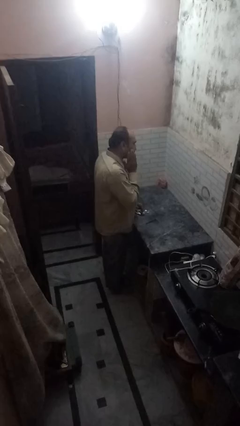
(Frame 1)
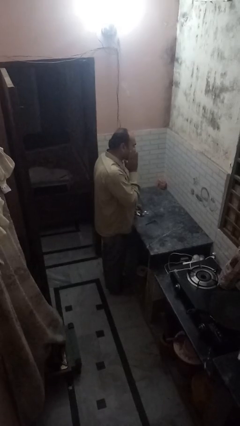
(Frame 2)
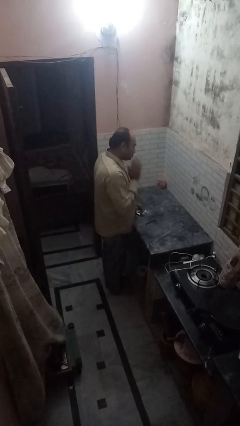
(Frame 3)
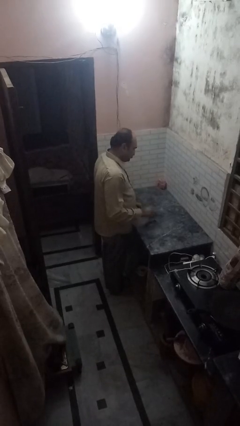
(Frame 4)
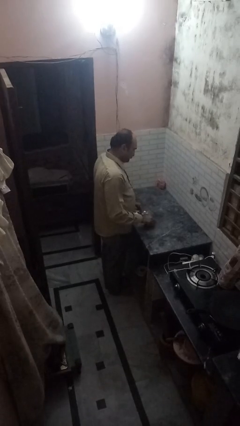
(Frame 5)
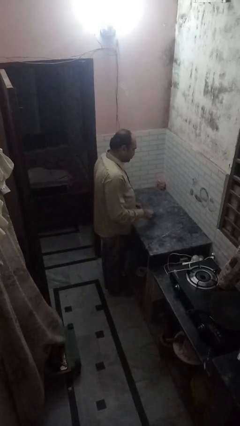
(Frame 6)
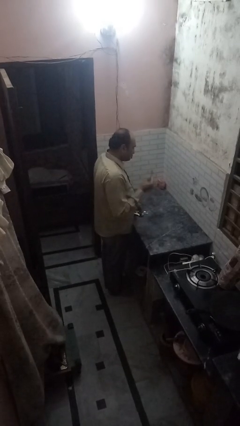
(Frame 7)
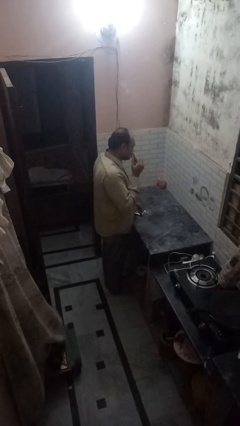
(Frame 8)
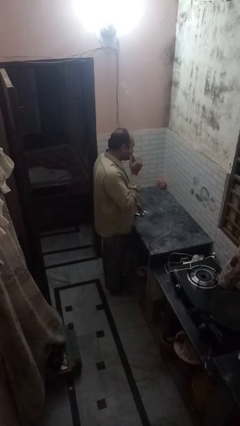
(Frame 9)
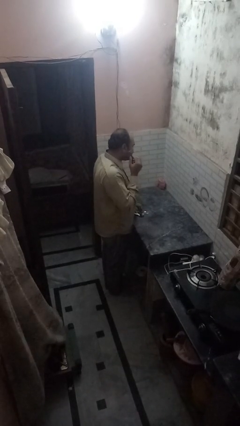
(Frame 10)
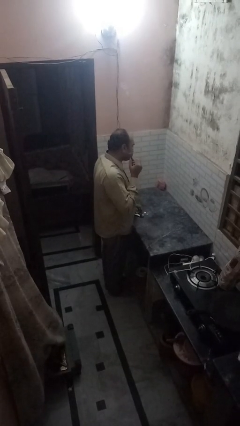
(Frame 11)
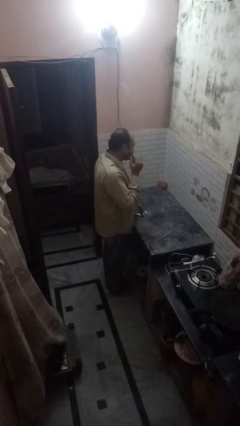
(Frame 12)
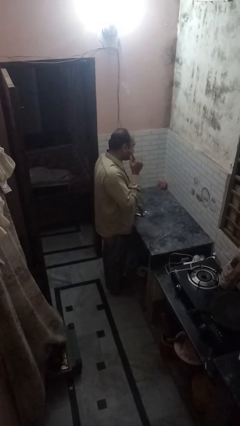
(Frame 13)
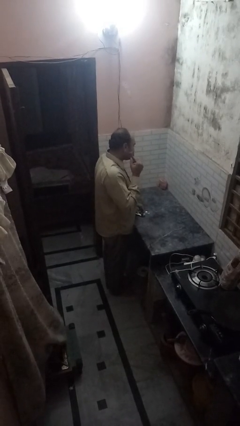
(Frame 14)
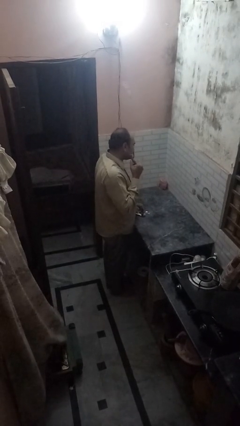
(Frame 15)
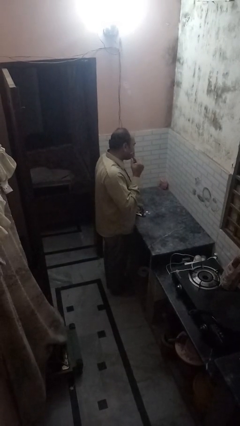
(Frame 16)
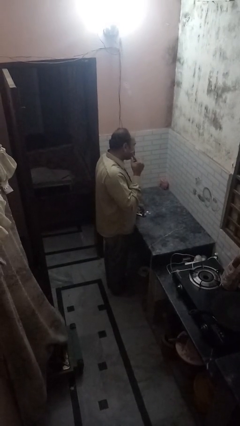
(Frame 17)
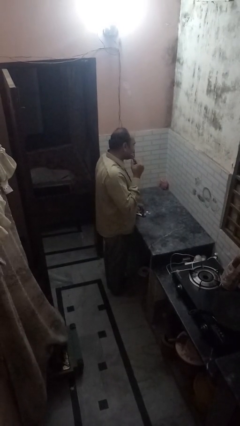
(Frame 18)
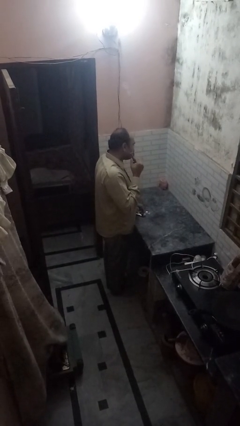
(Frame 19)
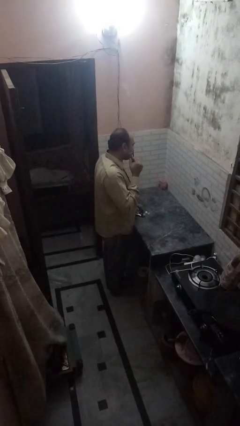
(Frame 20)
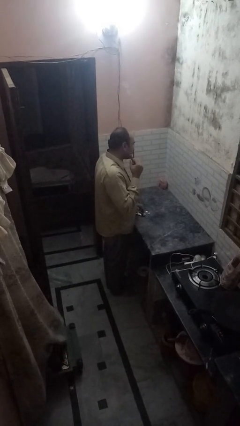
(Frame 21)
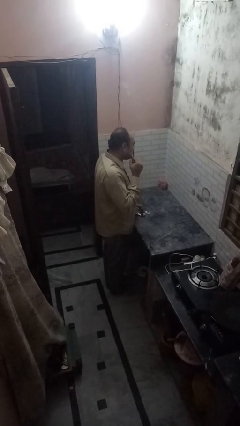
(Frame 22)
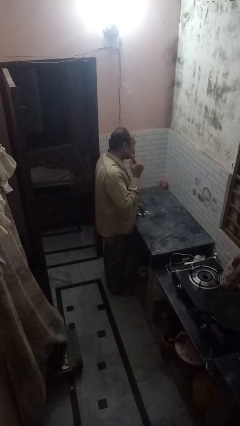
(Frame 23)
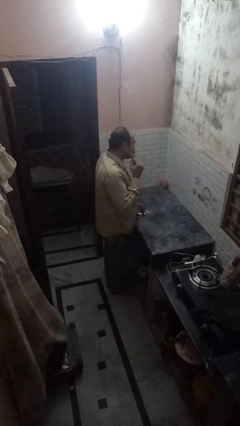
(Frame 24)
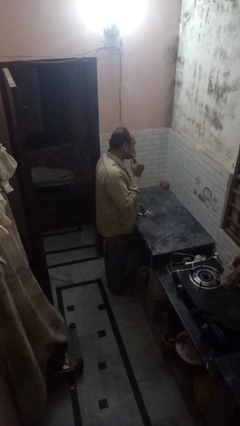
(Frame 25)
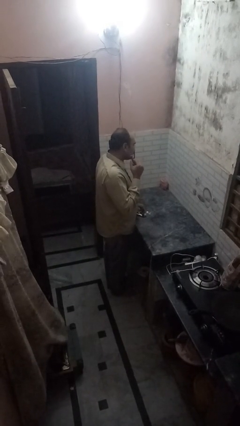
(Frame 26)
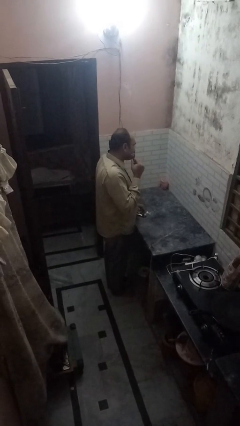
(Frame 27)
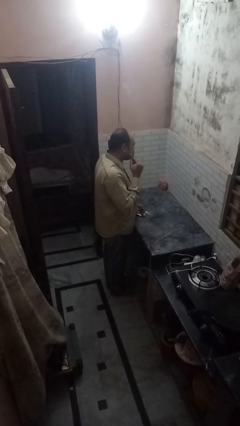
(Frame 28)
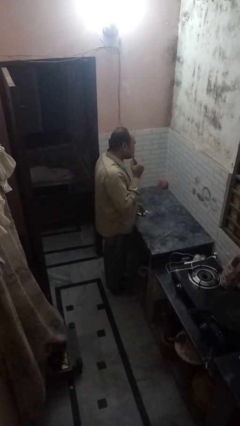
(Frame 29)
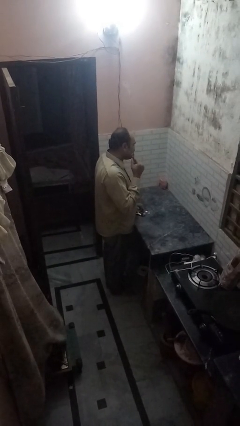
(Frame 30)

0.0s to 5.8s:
person shaves face

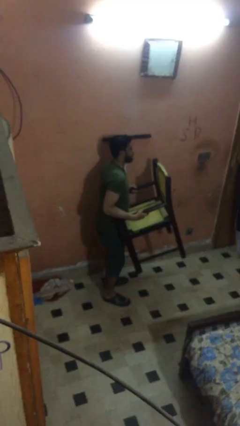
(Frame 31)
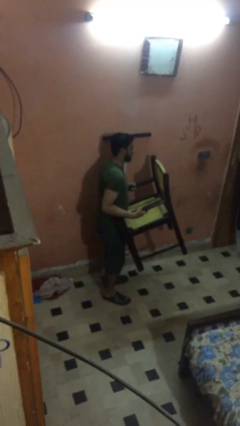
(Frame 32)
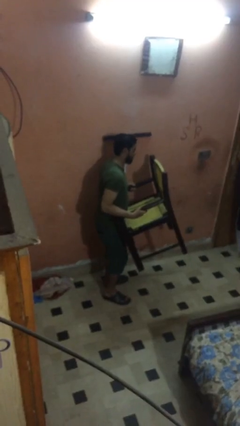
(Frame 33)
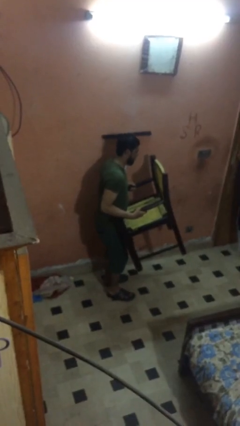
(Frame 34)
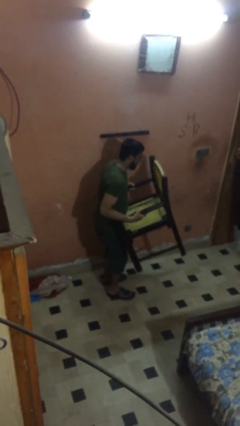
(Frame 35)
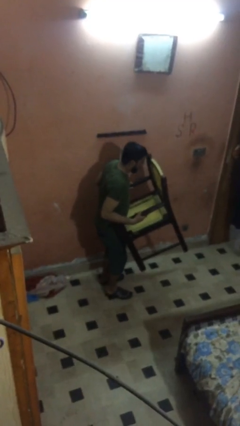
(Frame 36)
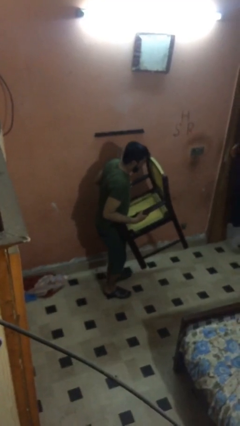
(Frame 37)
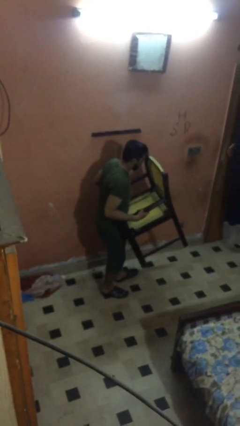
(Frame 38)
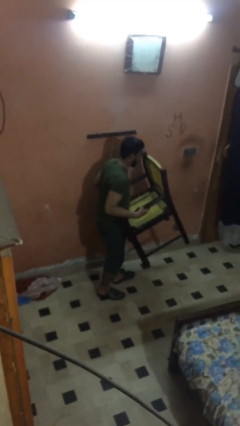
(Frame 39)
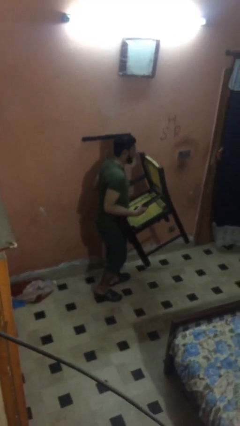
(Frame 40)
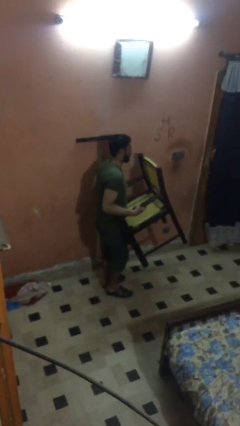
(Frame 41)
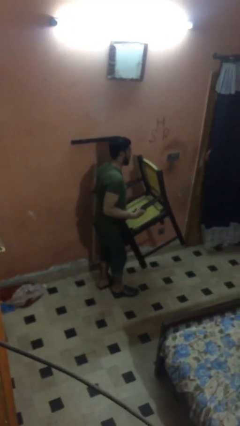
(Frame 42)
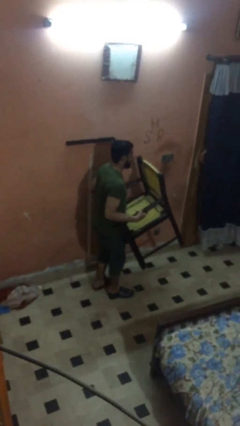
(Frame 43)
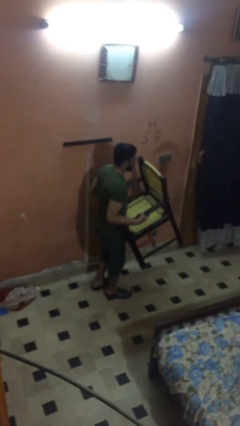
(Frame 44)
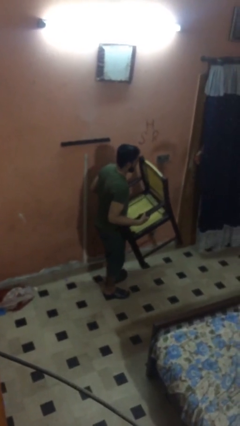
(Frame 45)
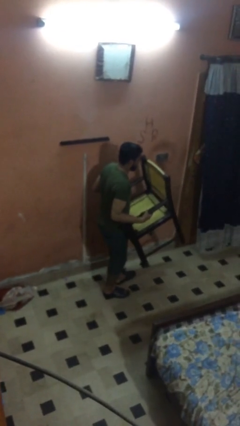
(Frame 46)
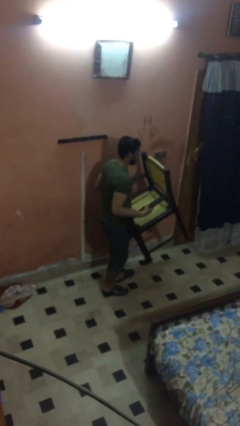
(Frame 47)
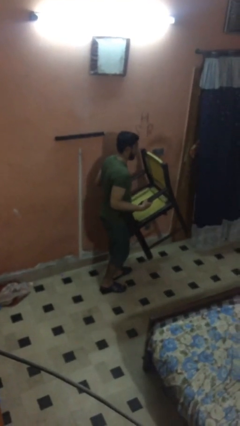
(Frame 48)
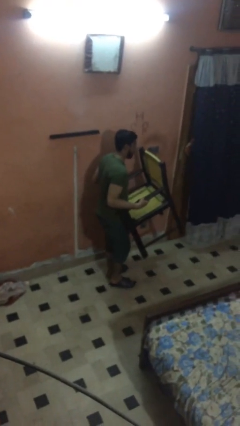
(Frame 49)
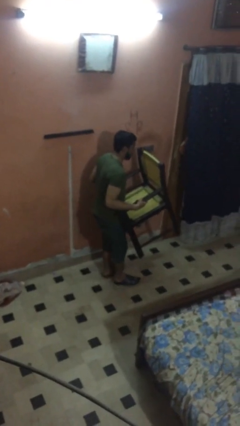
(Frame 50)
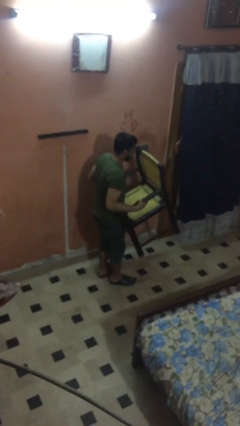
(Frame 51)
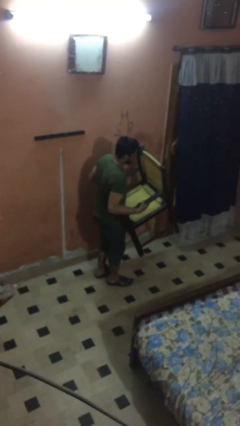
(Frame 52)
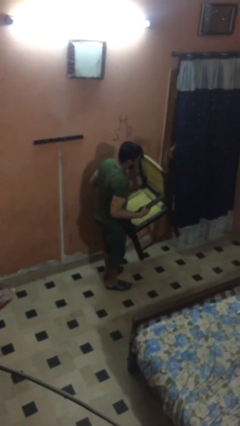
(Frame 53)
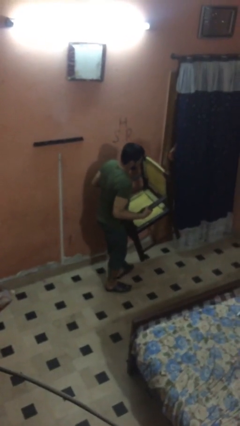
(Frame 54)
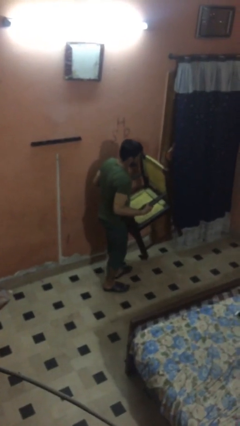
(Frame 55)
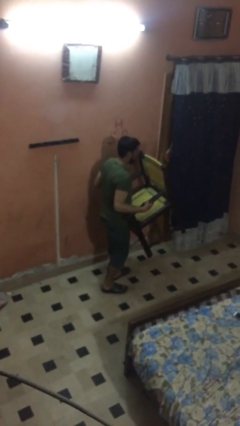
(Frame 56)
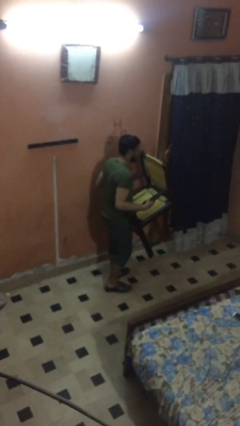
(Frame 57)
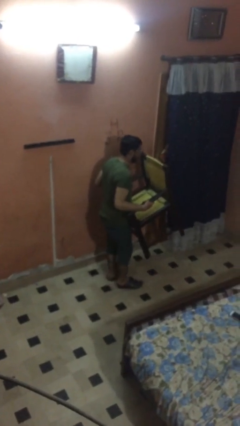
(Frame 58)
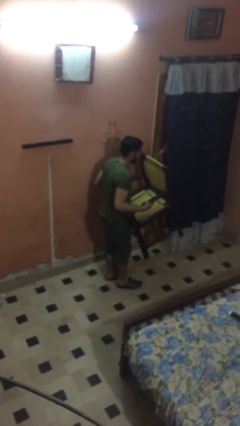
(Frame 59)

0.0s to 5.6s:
person carries heavy object

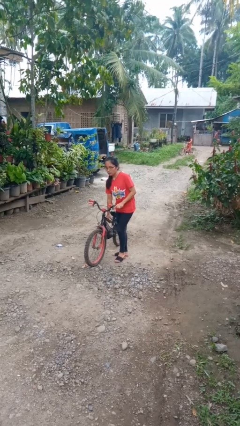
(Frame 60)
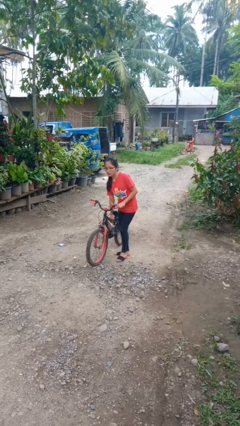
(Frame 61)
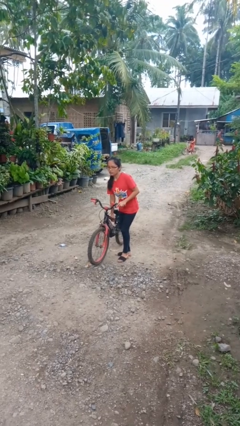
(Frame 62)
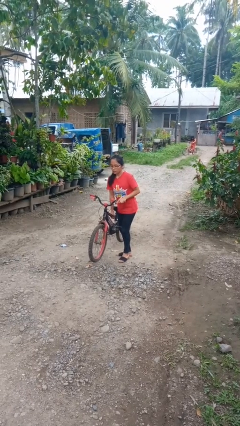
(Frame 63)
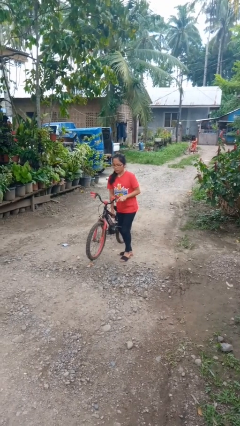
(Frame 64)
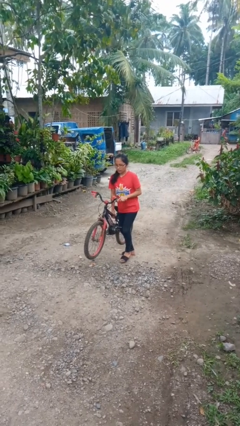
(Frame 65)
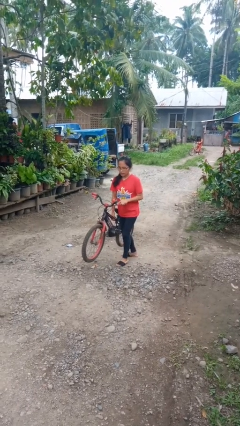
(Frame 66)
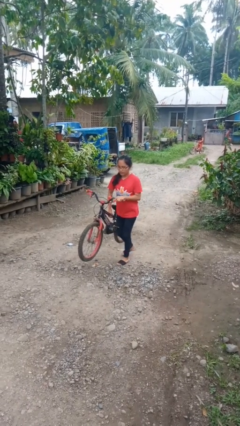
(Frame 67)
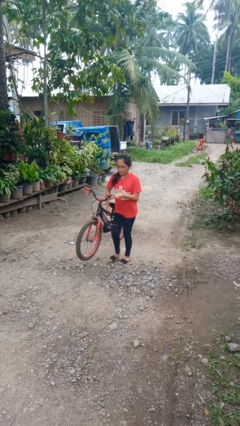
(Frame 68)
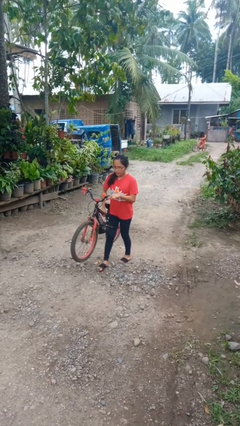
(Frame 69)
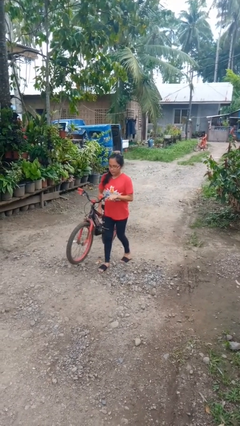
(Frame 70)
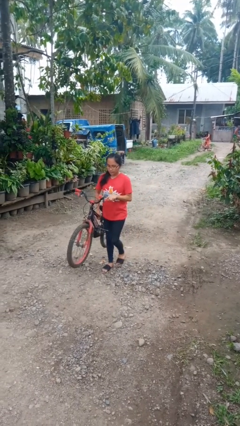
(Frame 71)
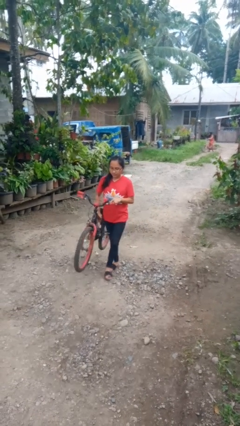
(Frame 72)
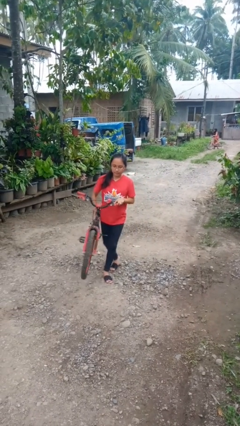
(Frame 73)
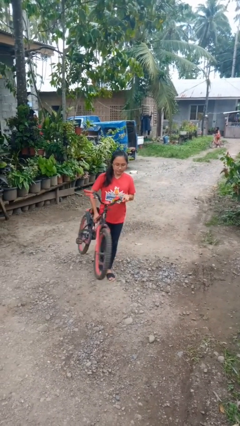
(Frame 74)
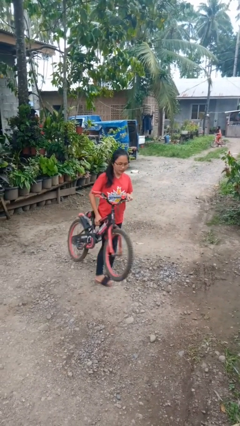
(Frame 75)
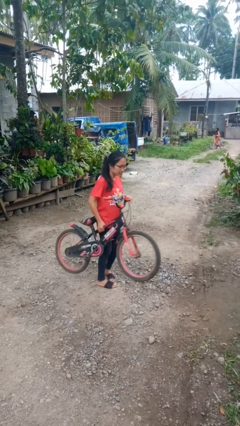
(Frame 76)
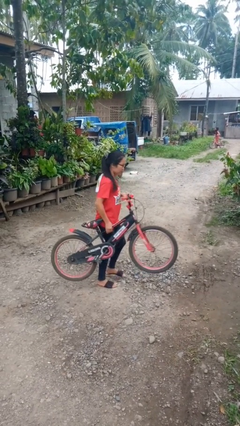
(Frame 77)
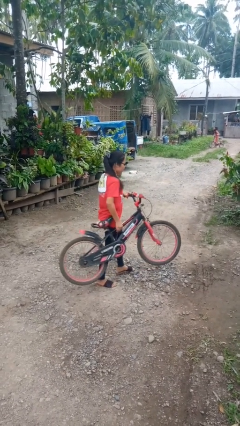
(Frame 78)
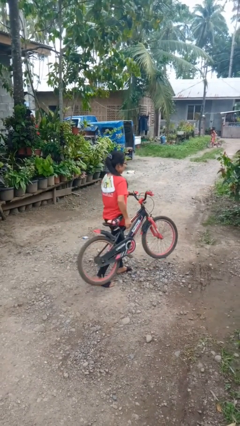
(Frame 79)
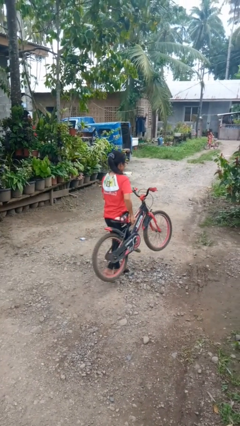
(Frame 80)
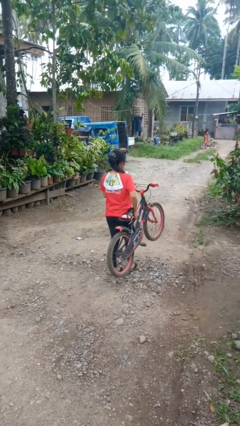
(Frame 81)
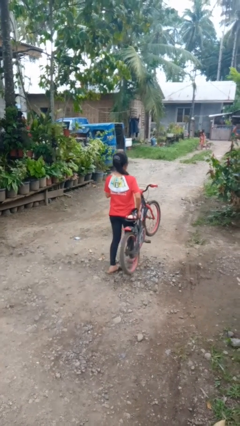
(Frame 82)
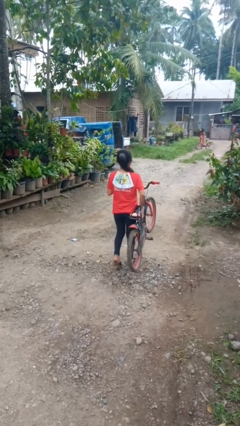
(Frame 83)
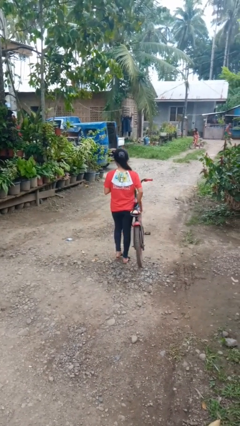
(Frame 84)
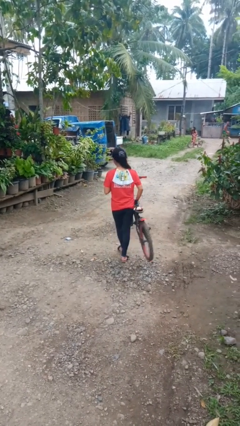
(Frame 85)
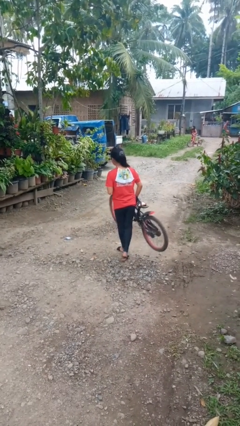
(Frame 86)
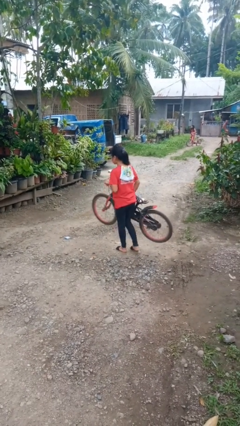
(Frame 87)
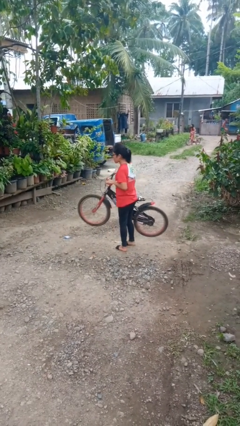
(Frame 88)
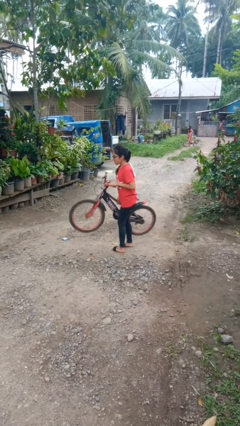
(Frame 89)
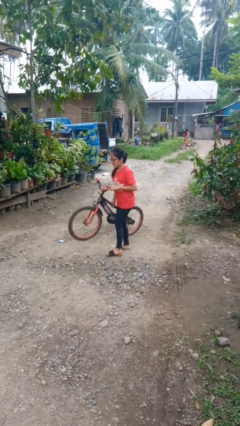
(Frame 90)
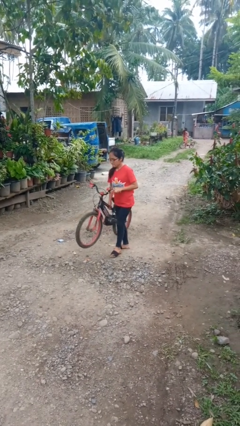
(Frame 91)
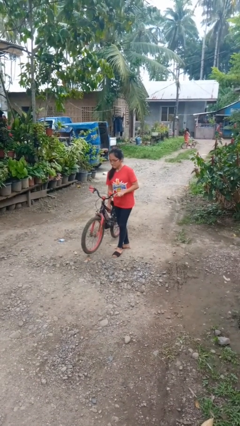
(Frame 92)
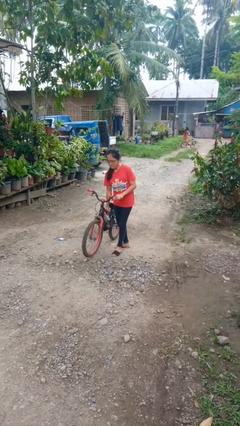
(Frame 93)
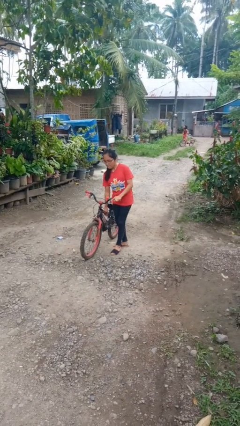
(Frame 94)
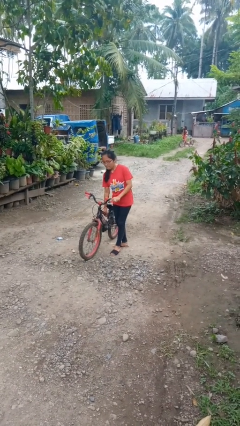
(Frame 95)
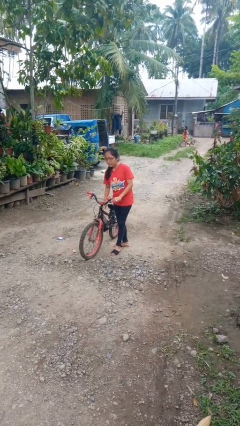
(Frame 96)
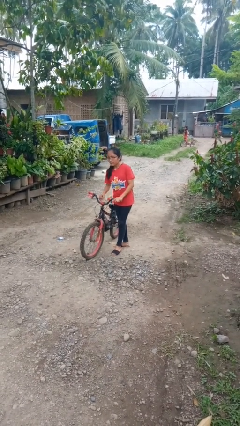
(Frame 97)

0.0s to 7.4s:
person carries bicycle
